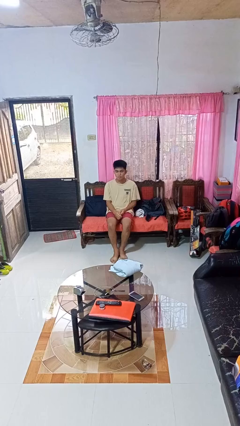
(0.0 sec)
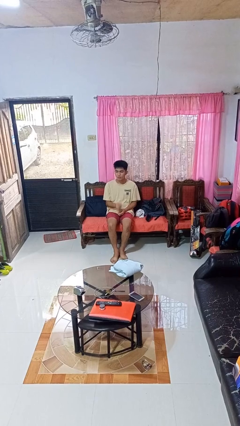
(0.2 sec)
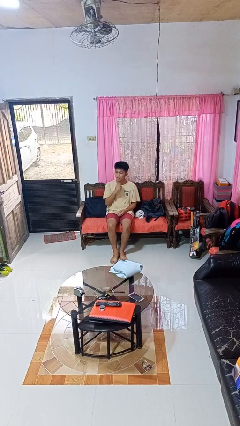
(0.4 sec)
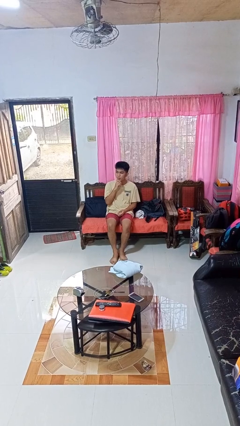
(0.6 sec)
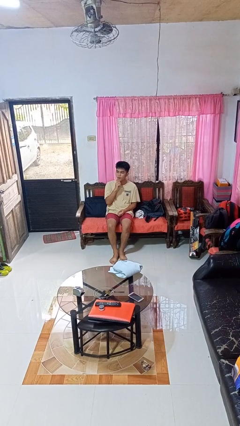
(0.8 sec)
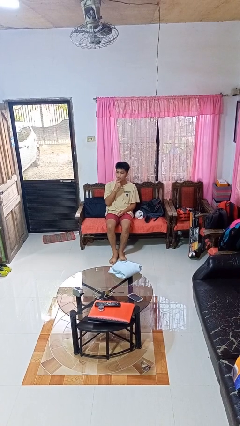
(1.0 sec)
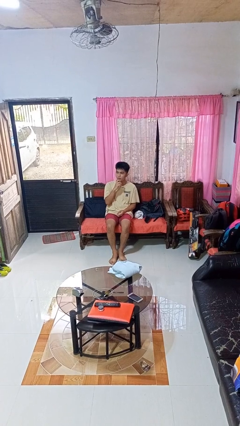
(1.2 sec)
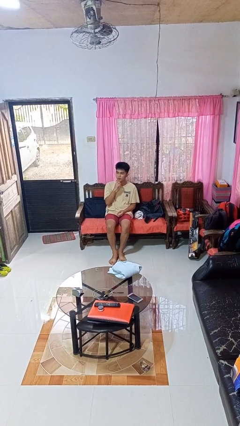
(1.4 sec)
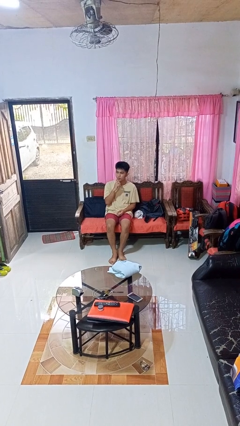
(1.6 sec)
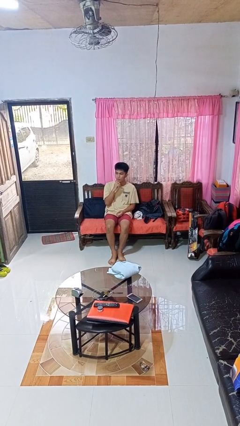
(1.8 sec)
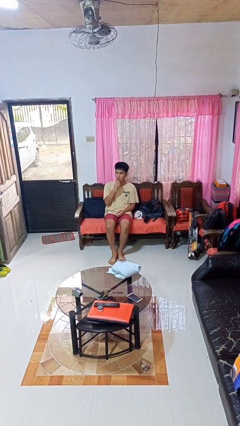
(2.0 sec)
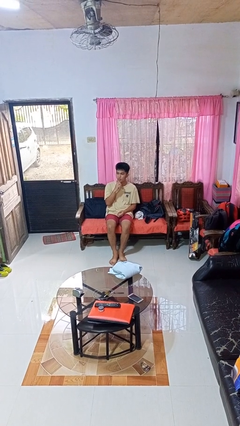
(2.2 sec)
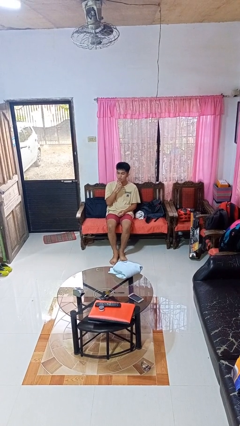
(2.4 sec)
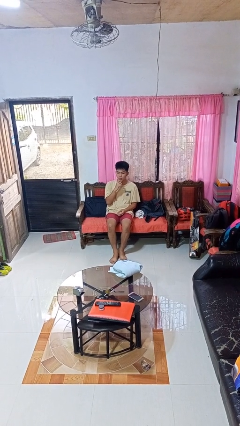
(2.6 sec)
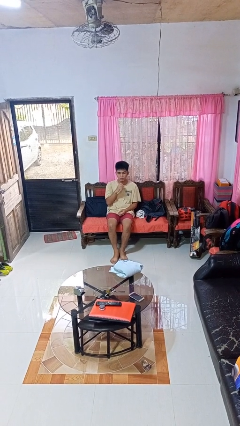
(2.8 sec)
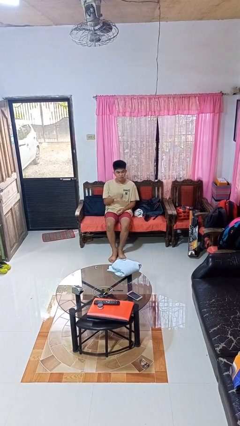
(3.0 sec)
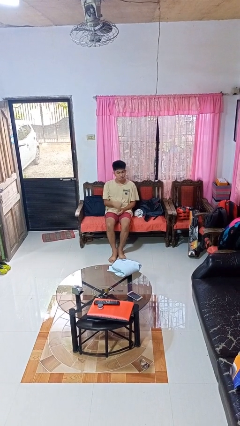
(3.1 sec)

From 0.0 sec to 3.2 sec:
person strokes chin

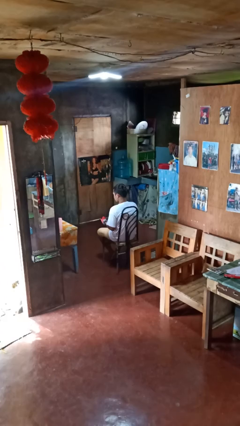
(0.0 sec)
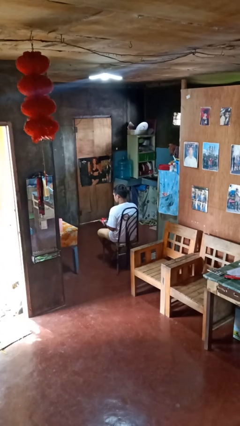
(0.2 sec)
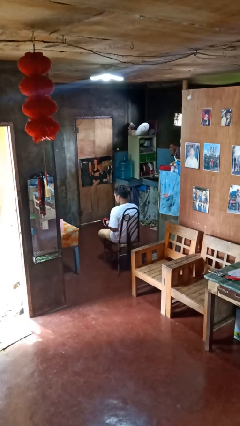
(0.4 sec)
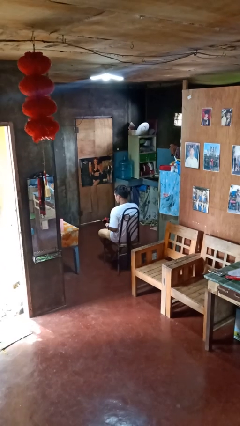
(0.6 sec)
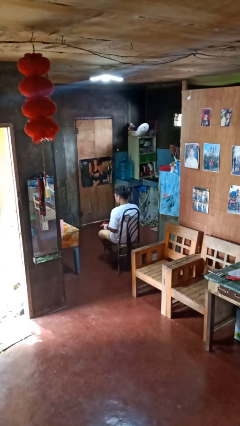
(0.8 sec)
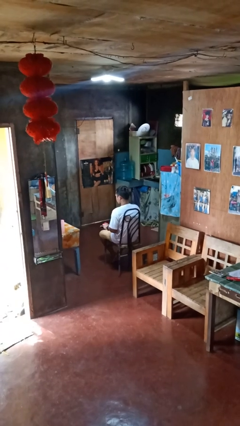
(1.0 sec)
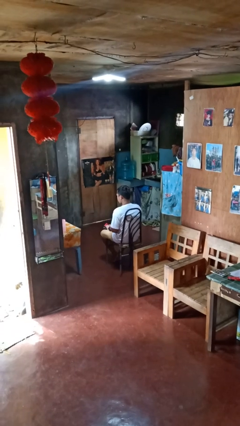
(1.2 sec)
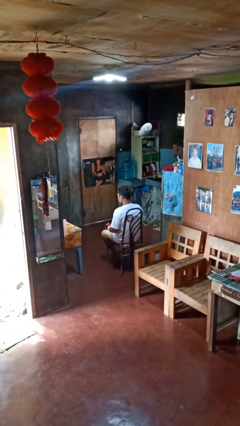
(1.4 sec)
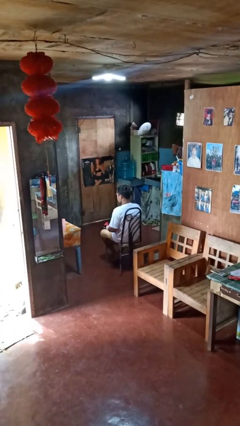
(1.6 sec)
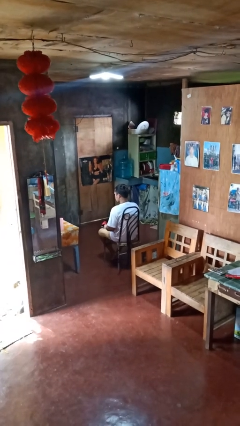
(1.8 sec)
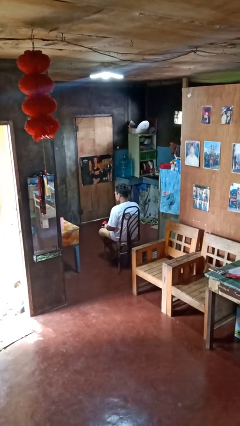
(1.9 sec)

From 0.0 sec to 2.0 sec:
person takes off gloves

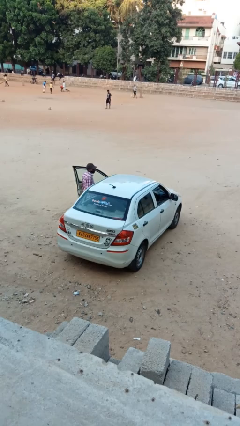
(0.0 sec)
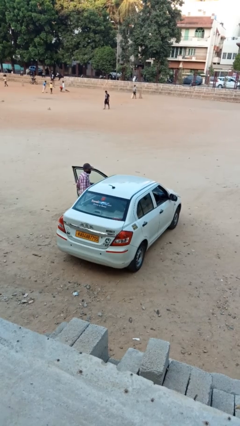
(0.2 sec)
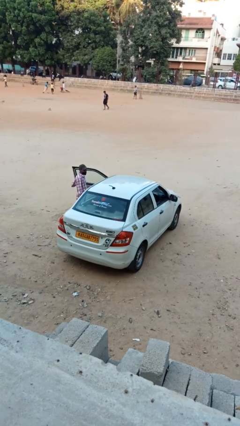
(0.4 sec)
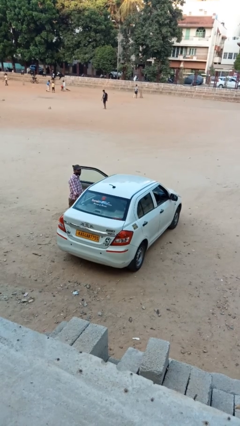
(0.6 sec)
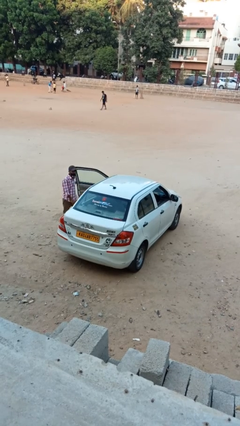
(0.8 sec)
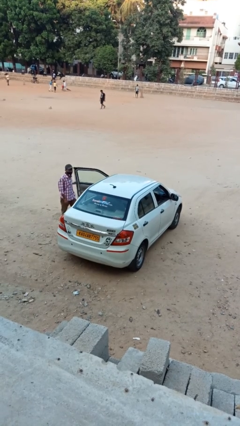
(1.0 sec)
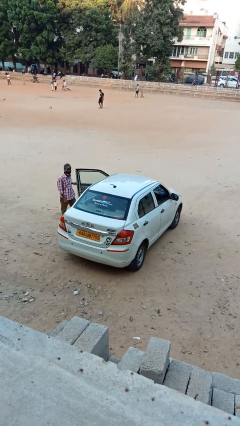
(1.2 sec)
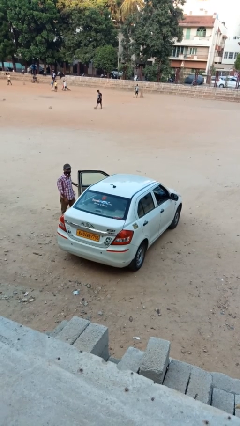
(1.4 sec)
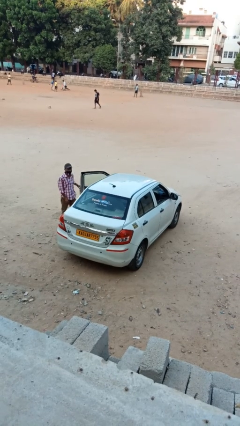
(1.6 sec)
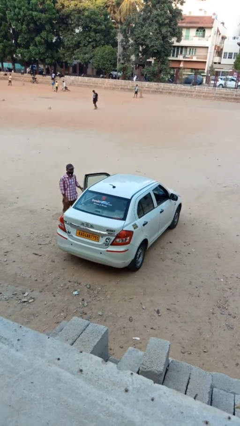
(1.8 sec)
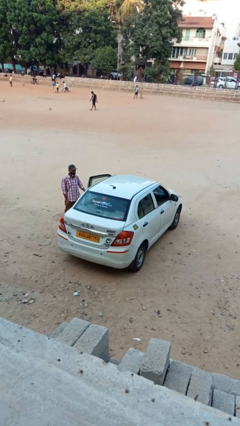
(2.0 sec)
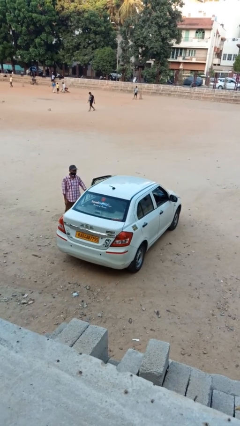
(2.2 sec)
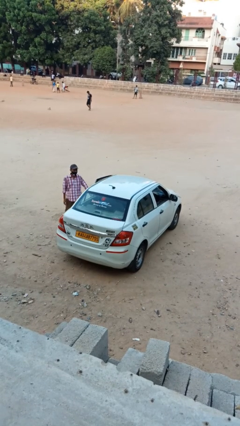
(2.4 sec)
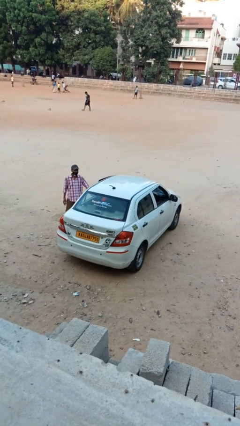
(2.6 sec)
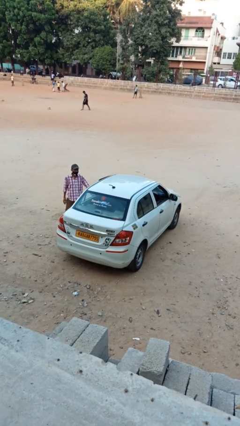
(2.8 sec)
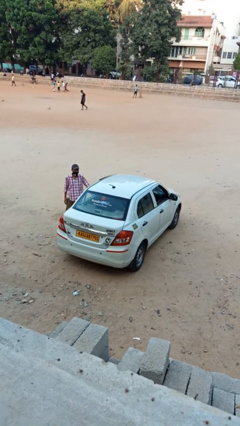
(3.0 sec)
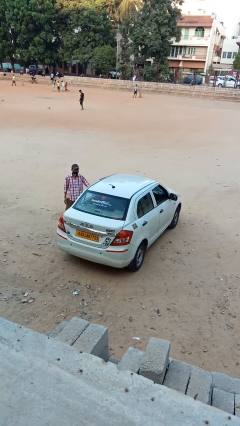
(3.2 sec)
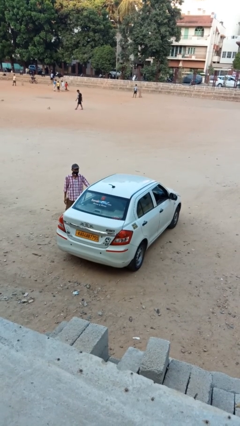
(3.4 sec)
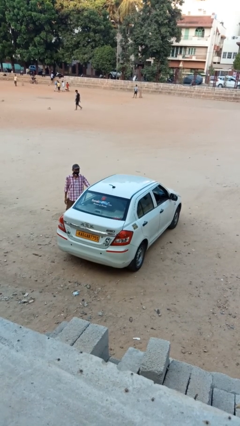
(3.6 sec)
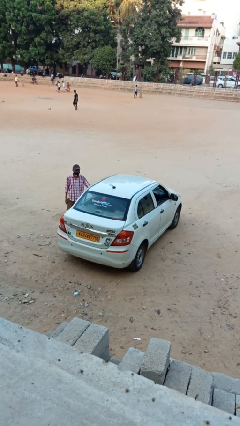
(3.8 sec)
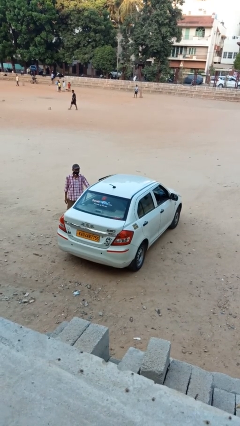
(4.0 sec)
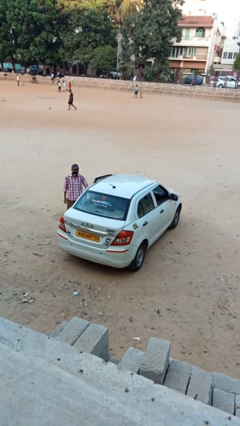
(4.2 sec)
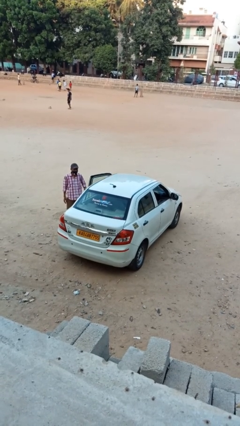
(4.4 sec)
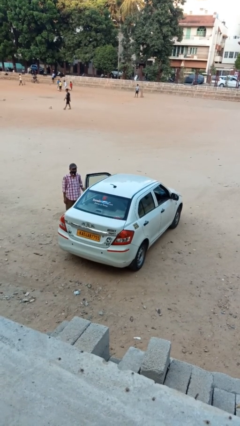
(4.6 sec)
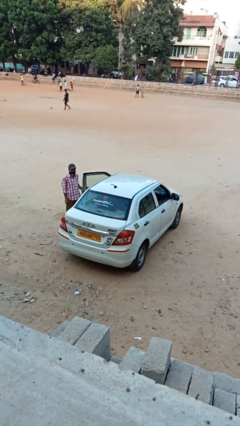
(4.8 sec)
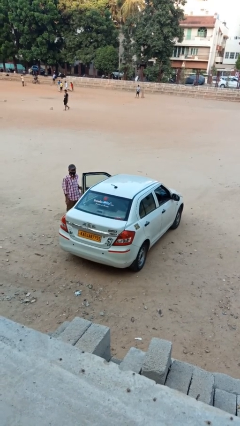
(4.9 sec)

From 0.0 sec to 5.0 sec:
car drops off person

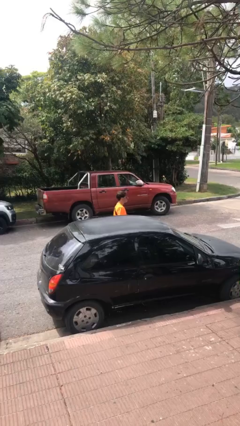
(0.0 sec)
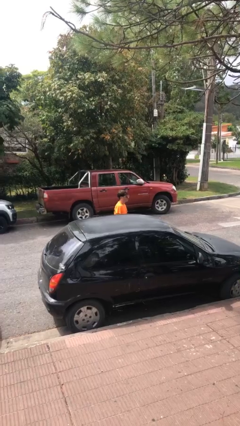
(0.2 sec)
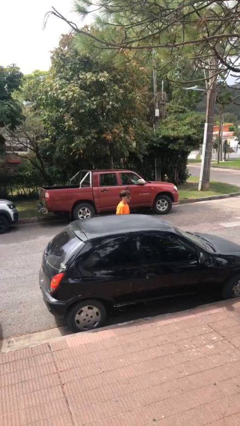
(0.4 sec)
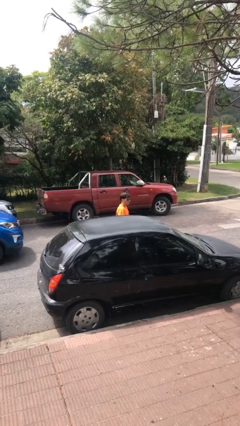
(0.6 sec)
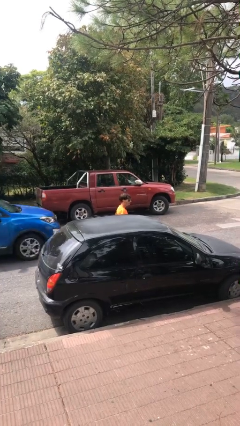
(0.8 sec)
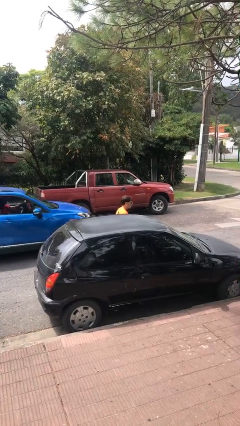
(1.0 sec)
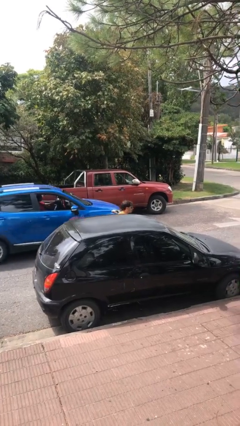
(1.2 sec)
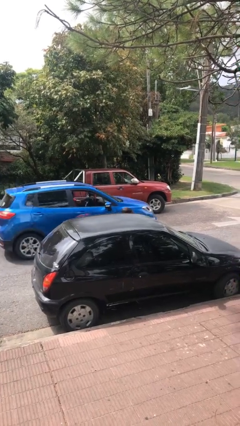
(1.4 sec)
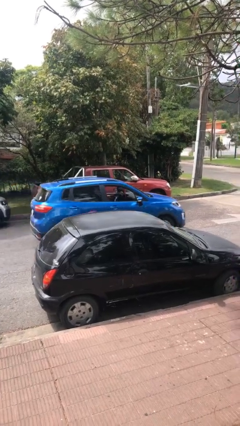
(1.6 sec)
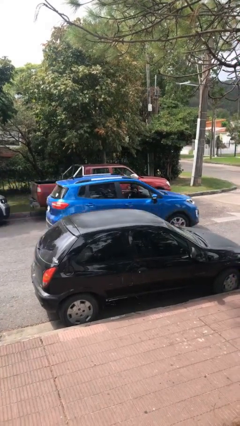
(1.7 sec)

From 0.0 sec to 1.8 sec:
person enters car

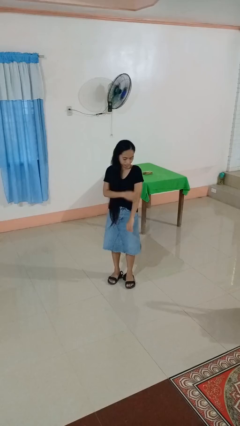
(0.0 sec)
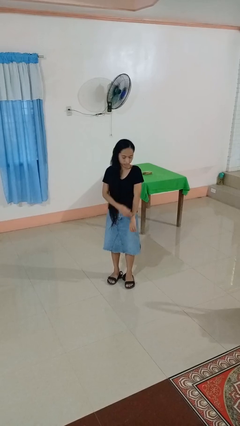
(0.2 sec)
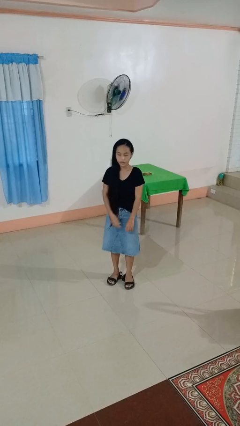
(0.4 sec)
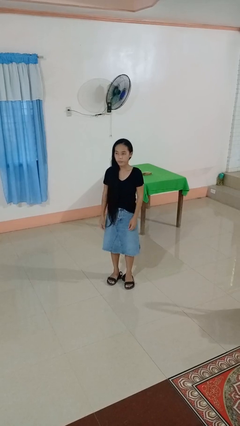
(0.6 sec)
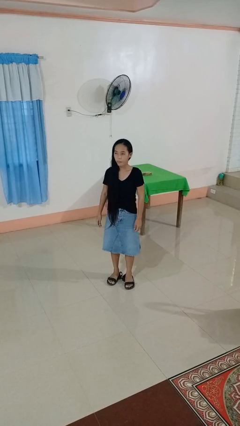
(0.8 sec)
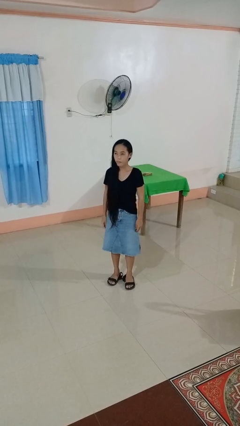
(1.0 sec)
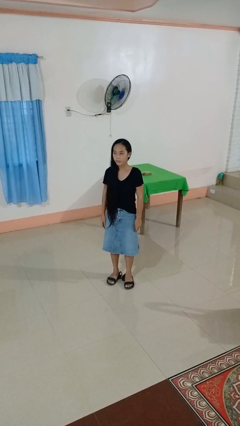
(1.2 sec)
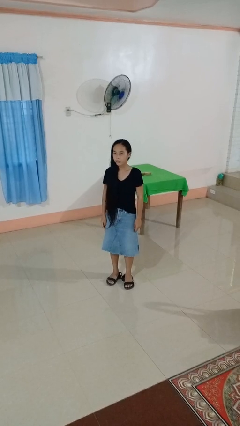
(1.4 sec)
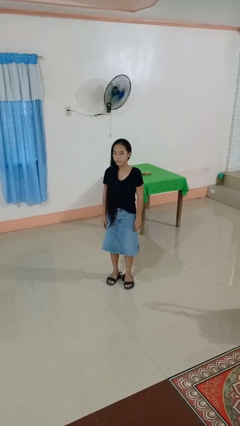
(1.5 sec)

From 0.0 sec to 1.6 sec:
person swats bug

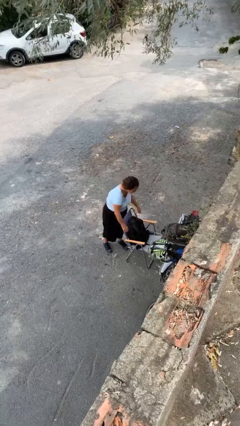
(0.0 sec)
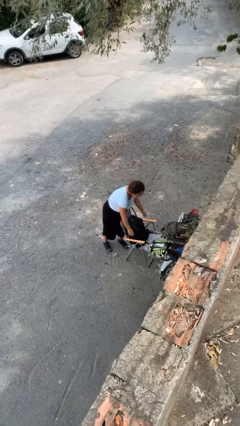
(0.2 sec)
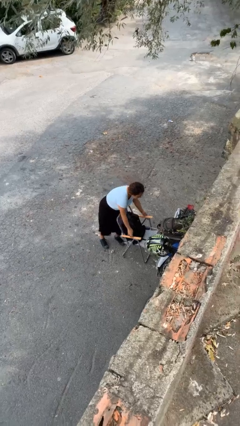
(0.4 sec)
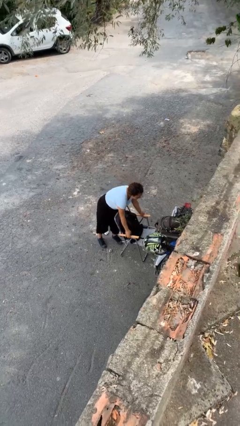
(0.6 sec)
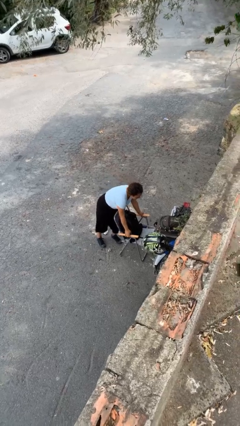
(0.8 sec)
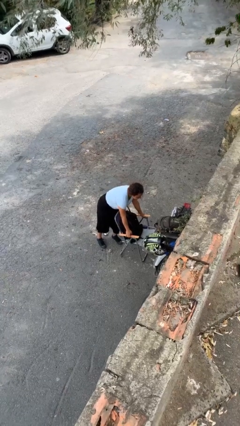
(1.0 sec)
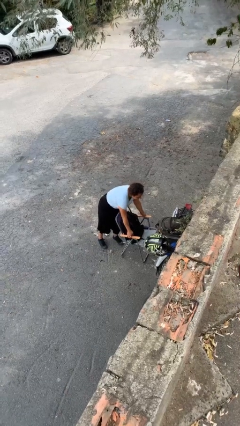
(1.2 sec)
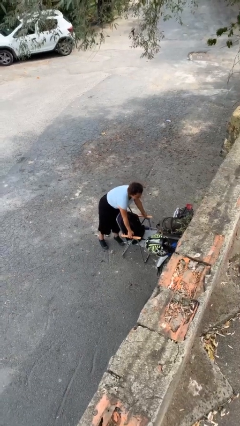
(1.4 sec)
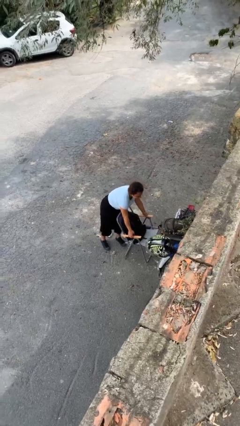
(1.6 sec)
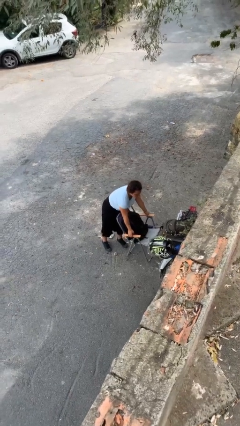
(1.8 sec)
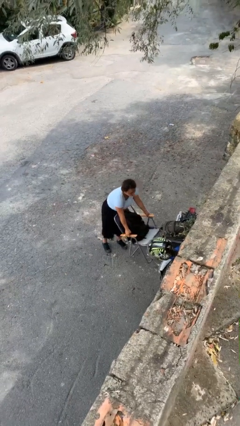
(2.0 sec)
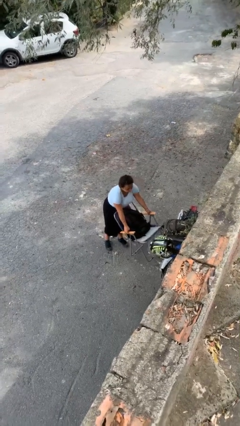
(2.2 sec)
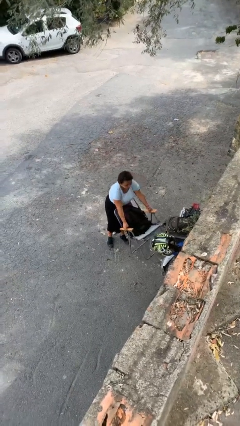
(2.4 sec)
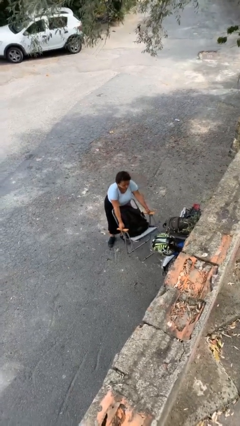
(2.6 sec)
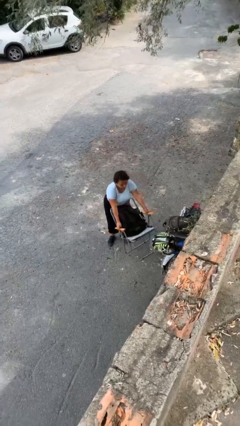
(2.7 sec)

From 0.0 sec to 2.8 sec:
person picks up object from floor

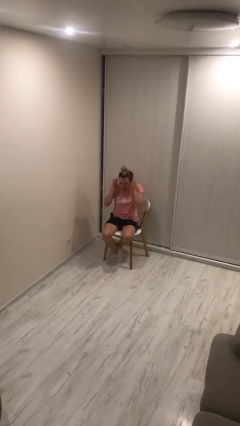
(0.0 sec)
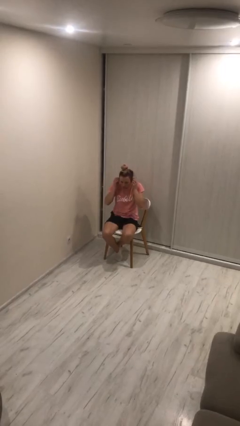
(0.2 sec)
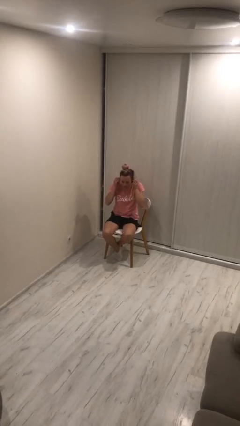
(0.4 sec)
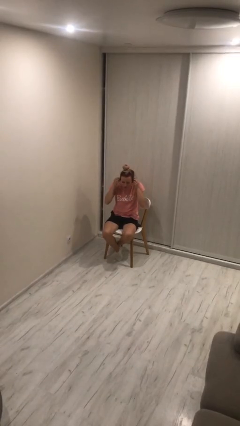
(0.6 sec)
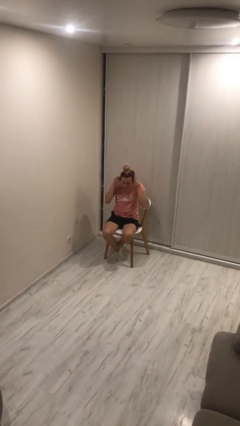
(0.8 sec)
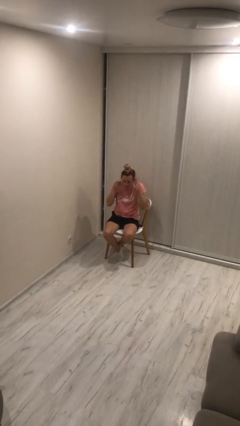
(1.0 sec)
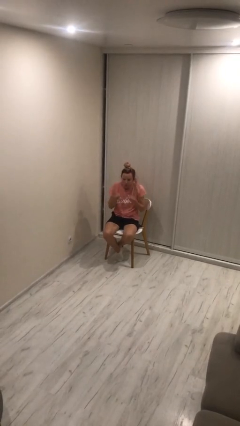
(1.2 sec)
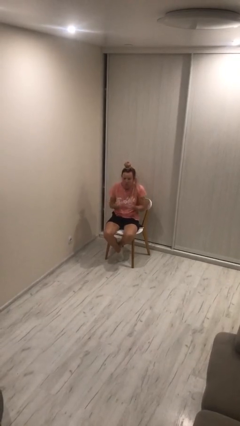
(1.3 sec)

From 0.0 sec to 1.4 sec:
person takes off earrings
